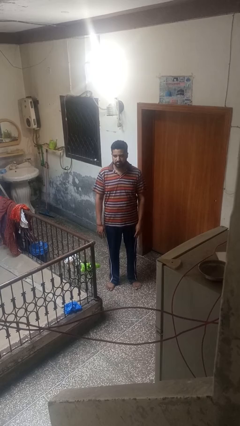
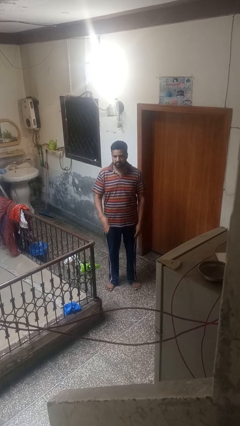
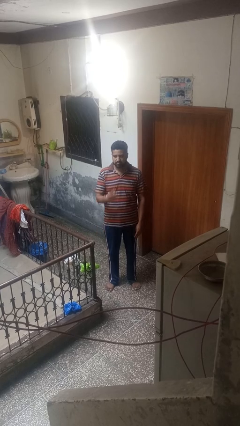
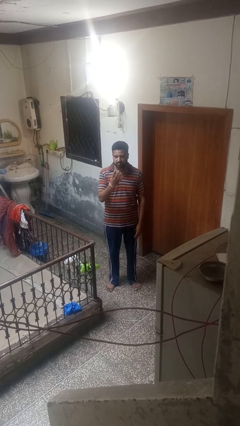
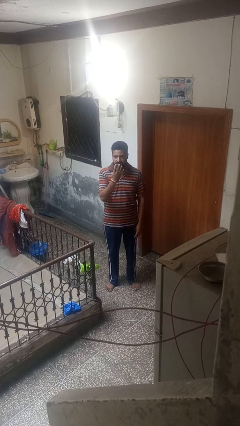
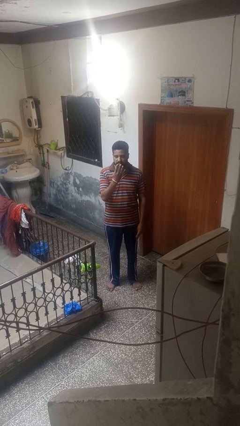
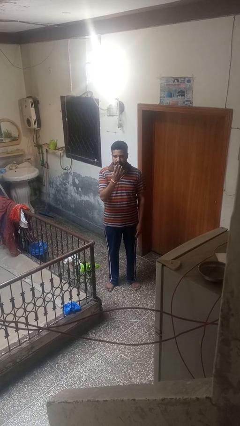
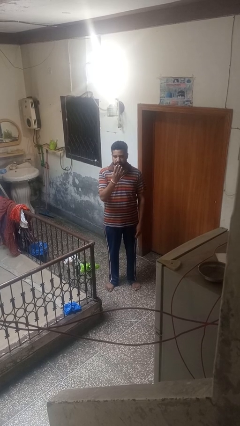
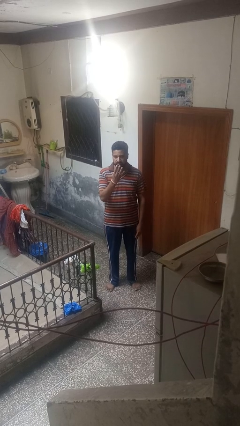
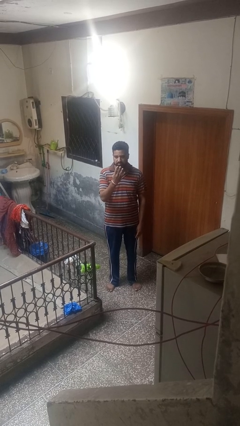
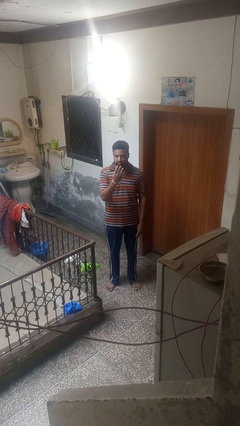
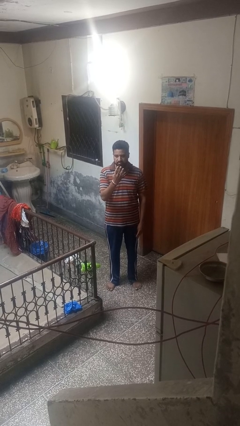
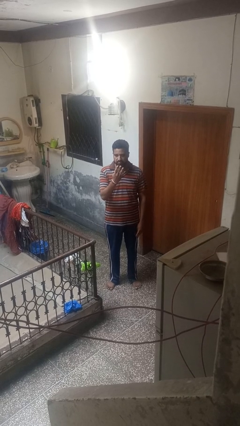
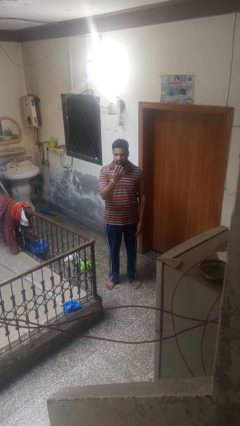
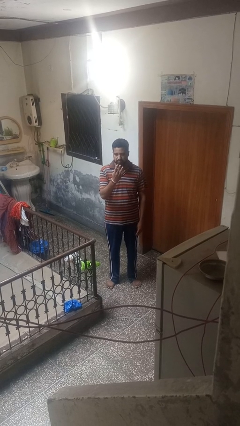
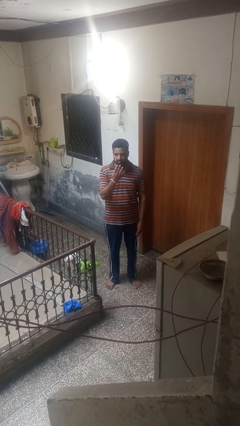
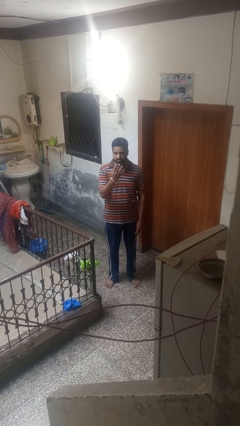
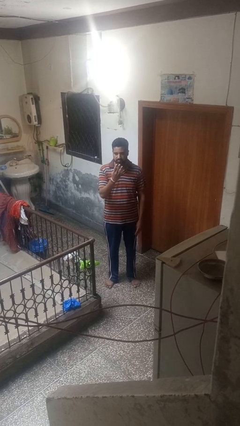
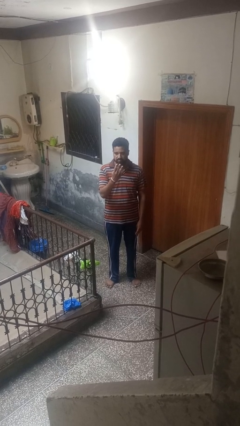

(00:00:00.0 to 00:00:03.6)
person gestures number four

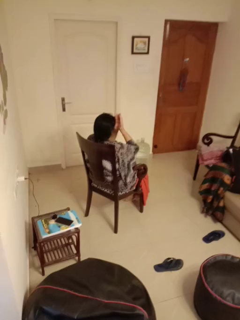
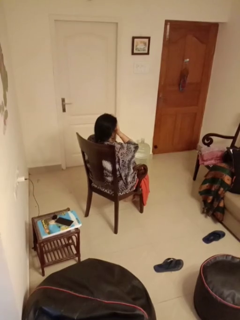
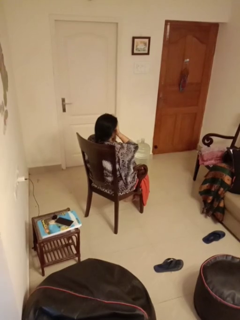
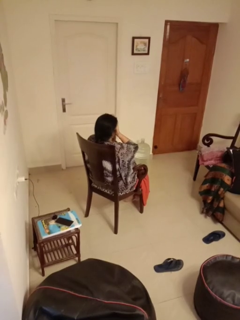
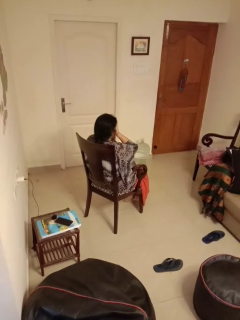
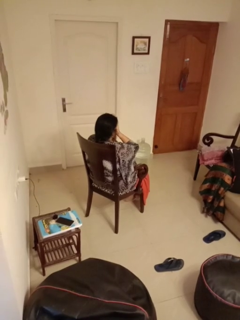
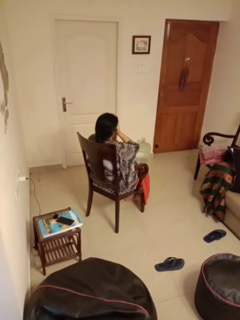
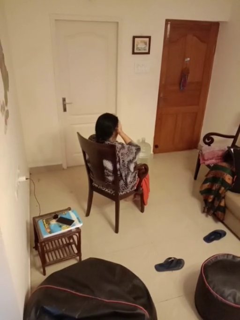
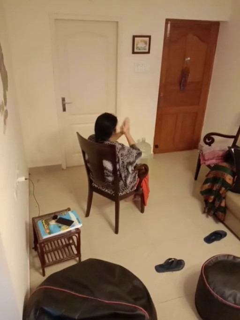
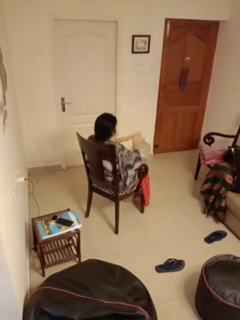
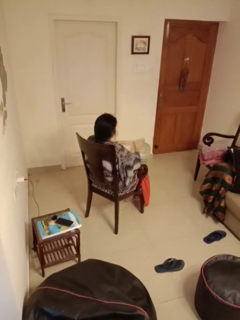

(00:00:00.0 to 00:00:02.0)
person covers face with hands

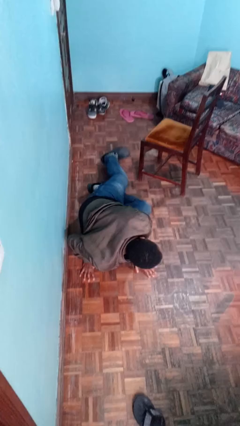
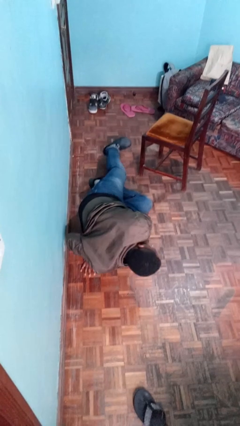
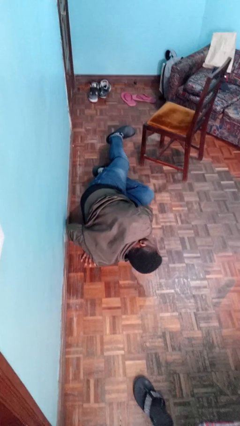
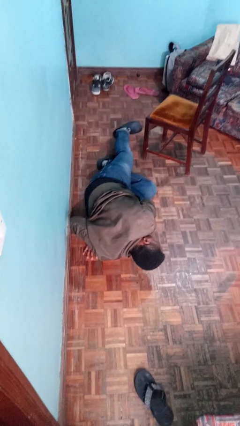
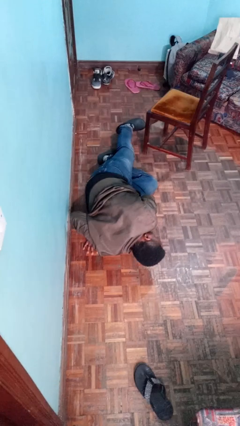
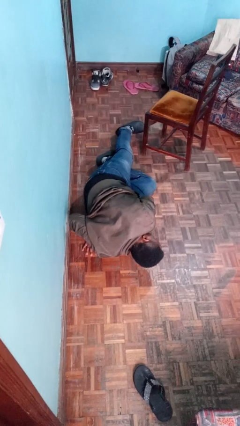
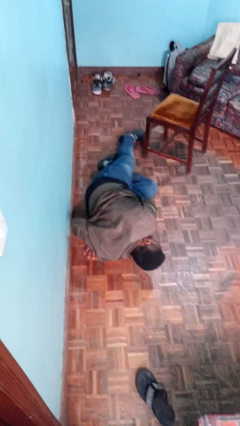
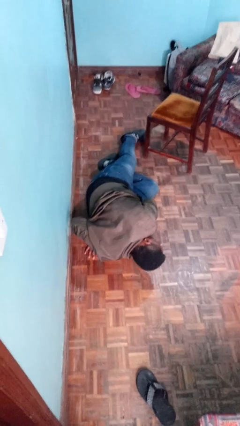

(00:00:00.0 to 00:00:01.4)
person lies down on floor

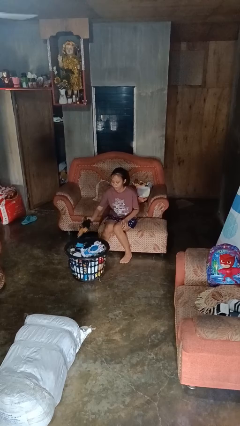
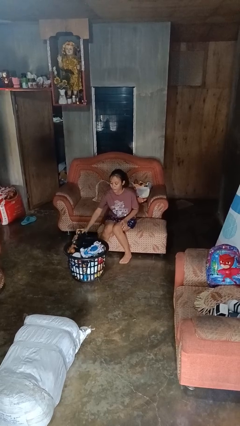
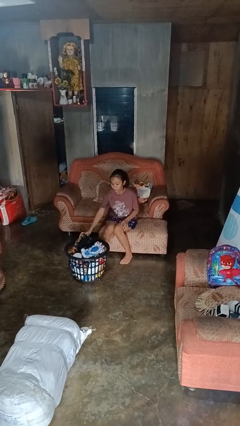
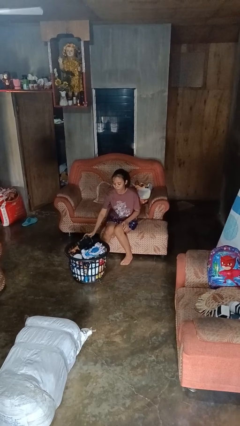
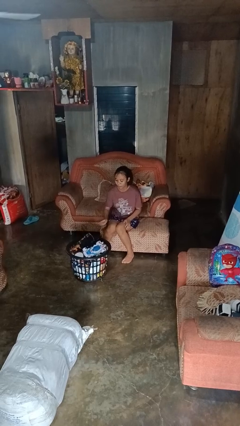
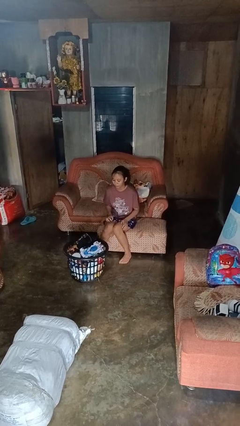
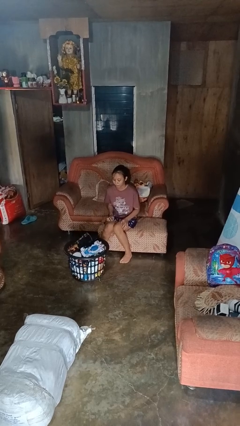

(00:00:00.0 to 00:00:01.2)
person puts object into basket

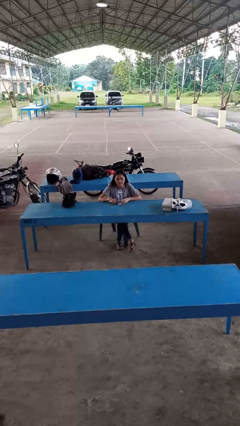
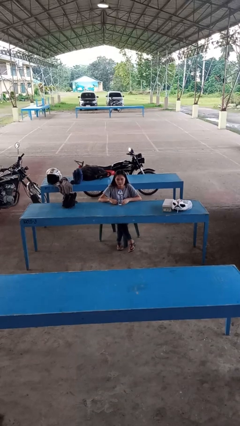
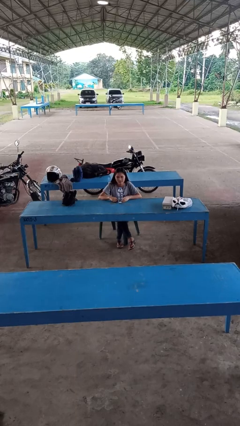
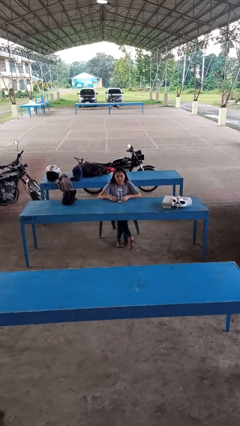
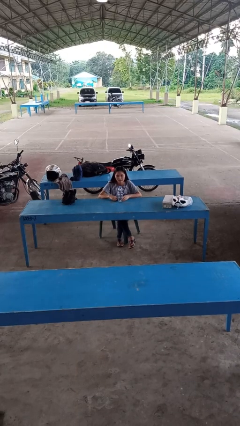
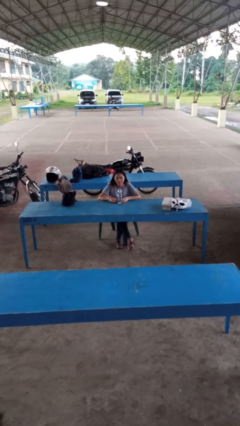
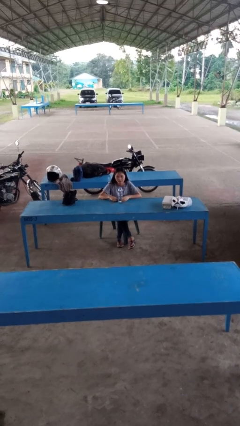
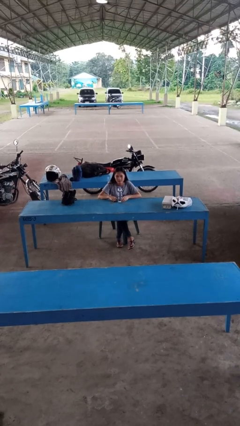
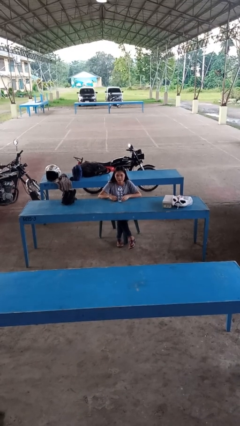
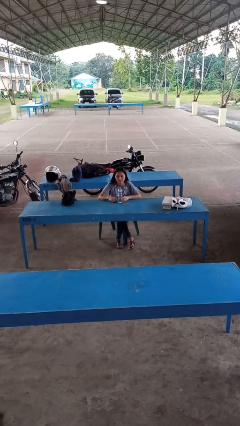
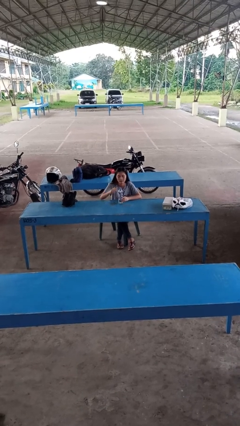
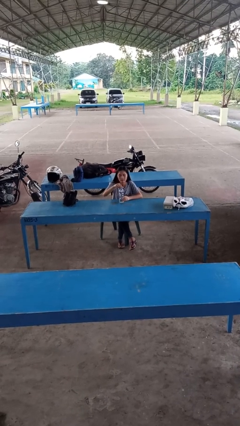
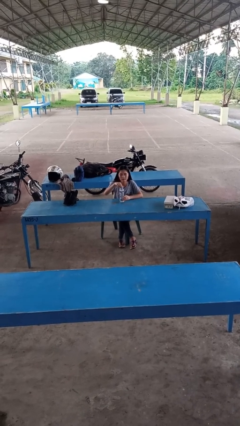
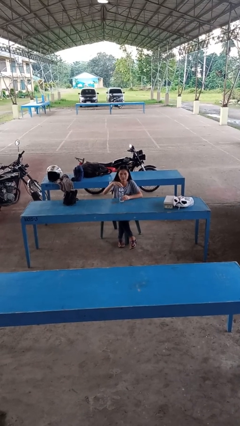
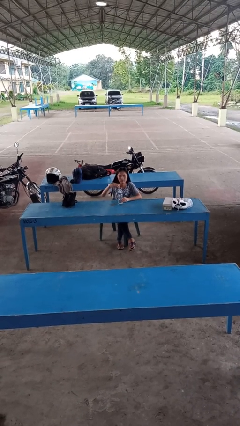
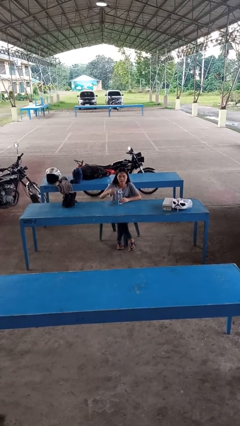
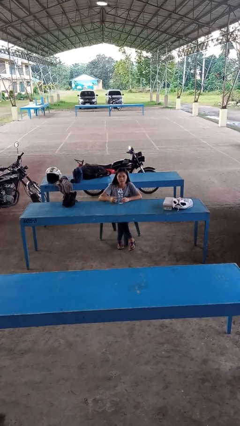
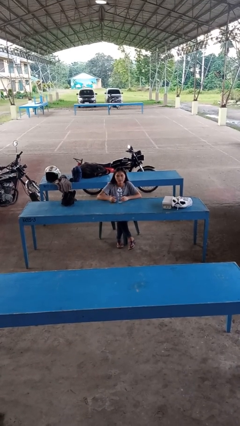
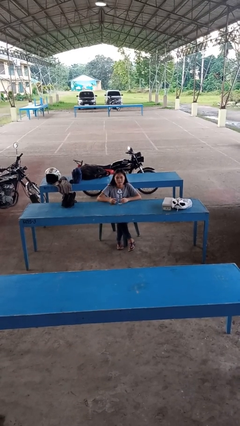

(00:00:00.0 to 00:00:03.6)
person unscrews lid from bottle

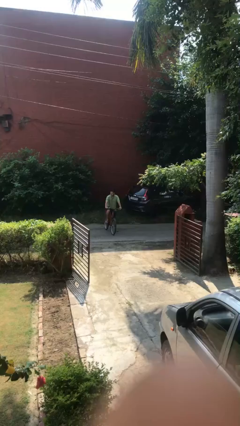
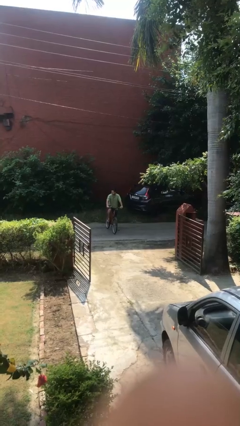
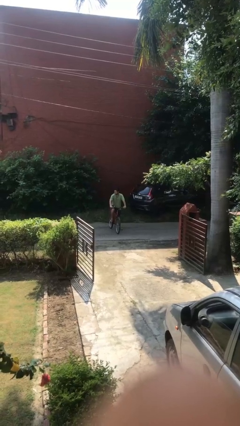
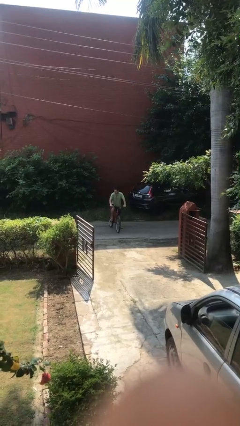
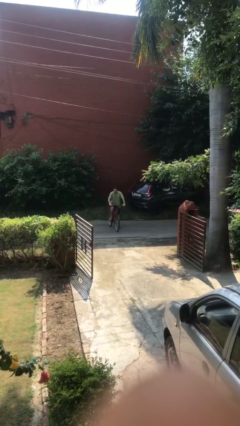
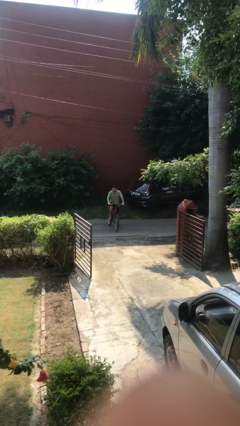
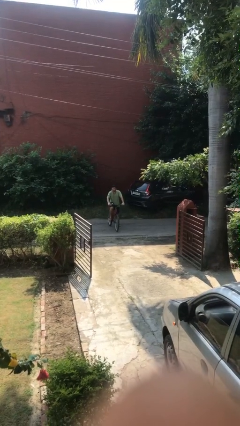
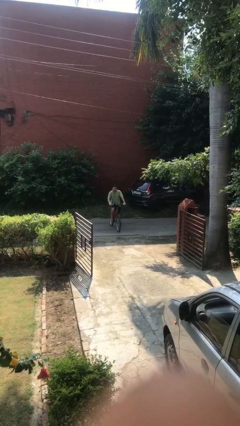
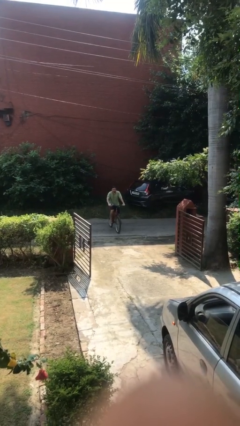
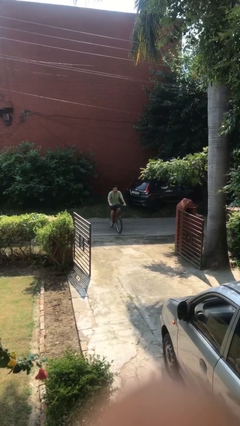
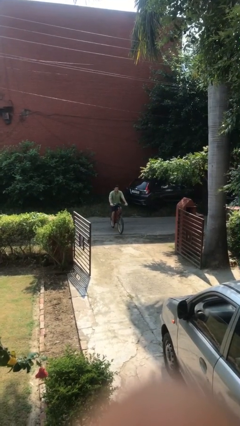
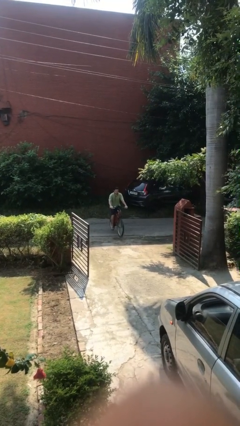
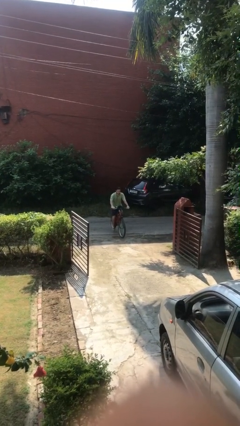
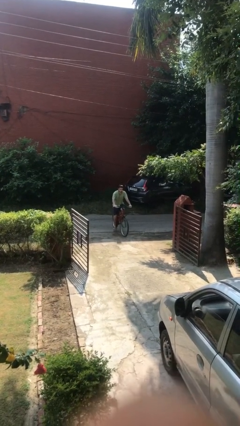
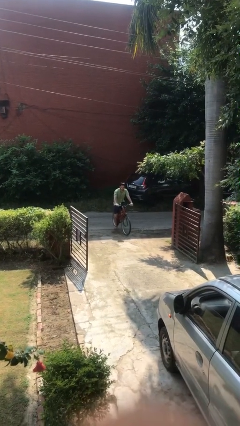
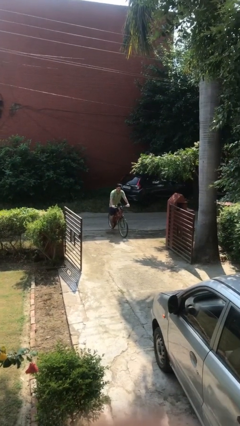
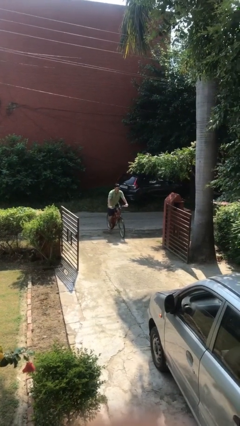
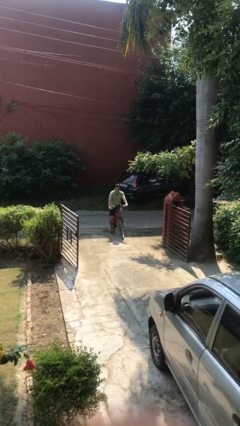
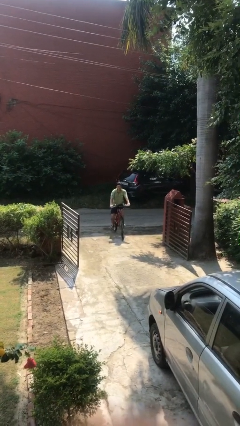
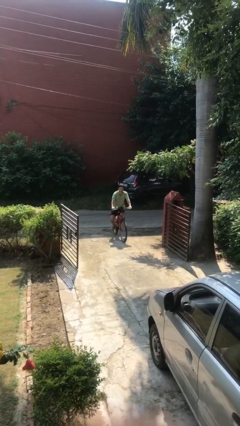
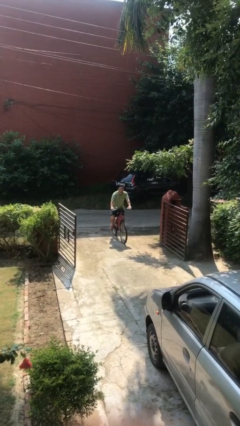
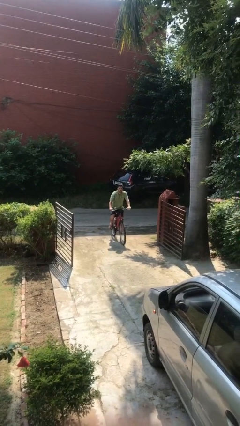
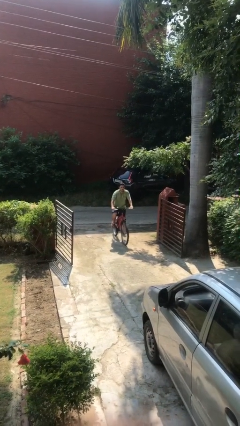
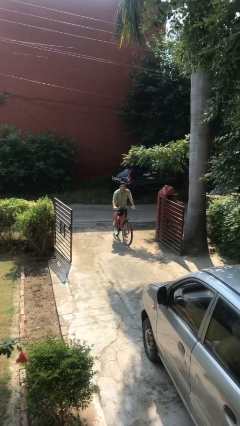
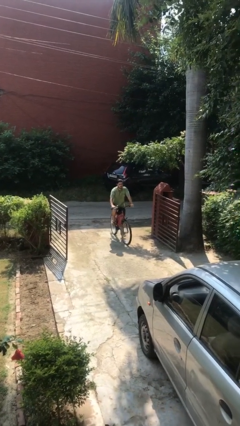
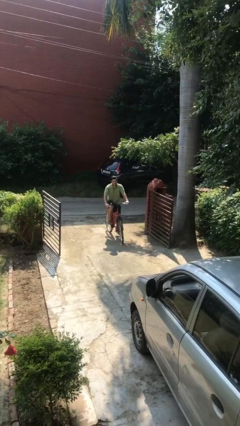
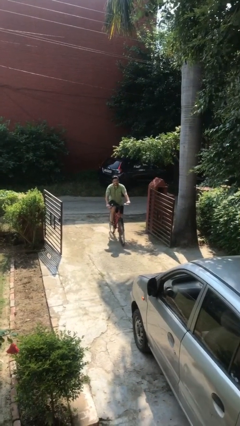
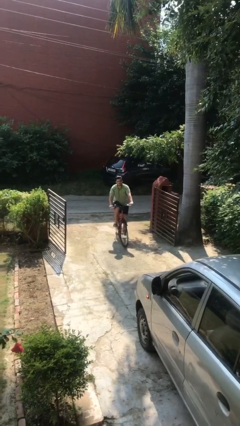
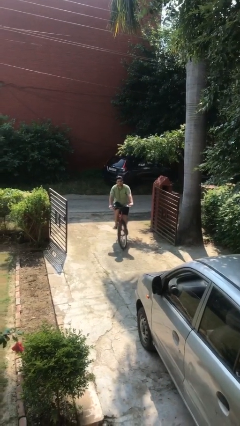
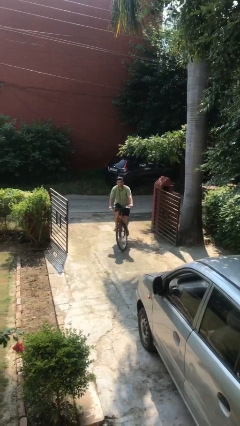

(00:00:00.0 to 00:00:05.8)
person rides bicycle
